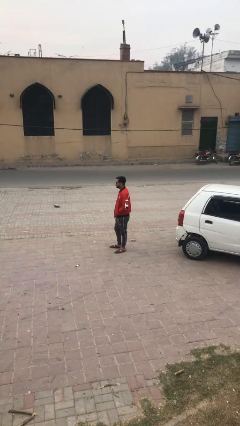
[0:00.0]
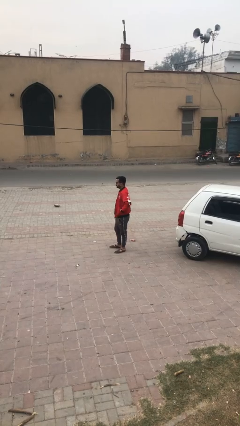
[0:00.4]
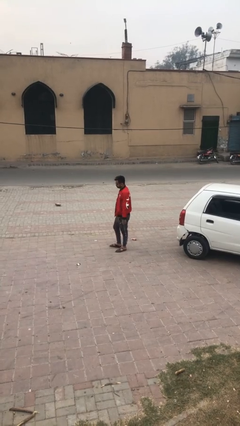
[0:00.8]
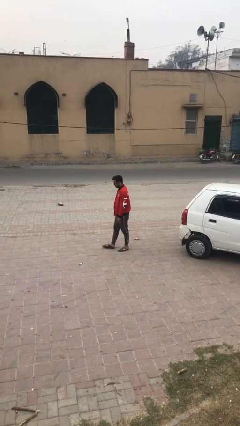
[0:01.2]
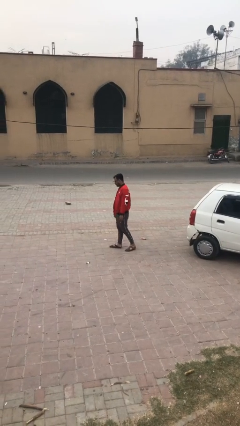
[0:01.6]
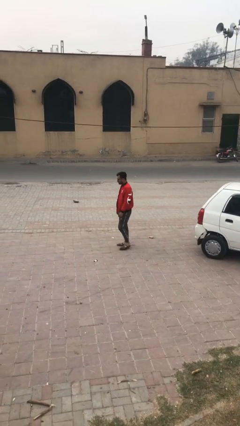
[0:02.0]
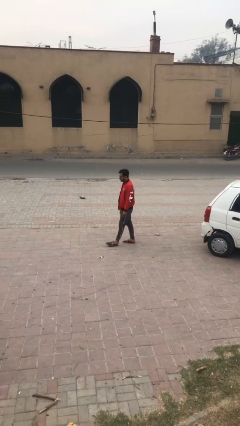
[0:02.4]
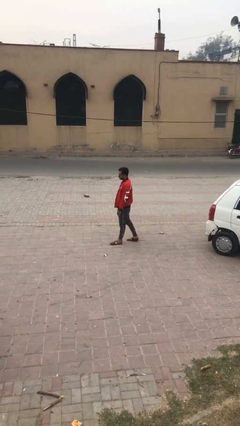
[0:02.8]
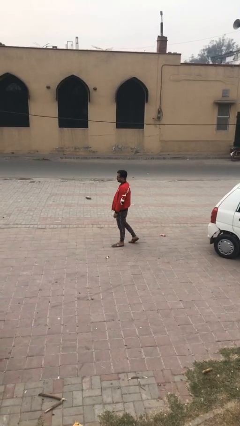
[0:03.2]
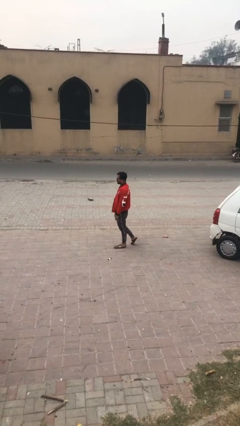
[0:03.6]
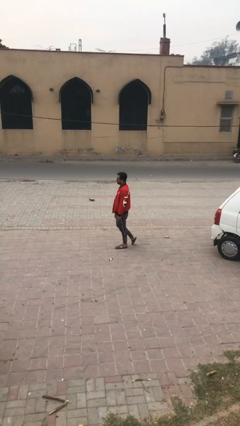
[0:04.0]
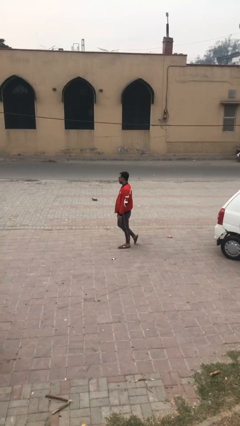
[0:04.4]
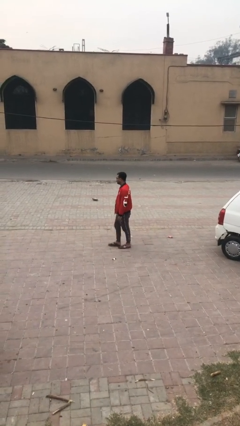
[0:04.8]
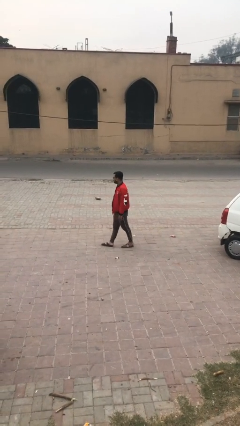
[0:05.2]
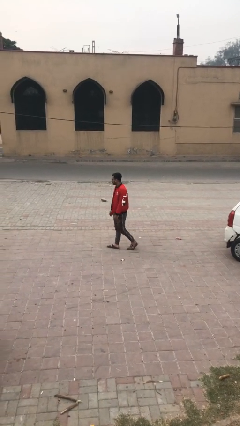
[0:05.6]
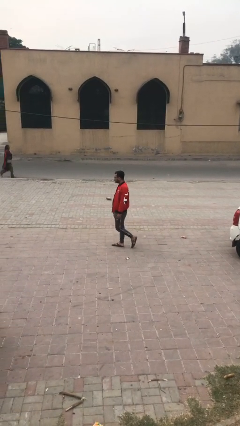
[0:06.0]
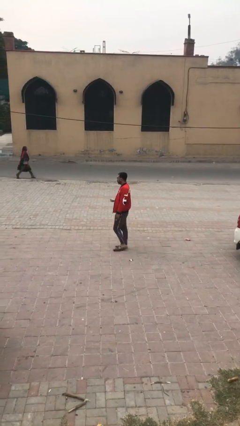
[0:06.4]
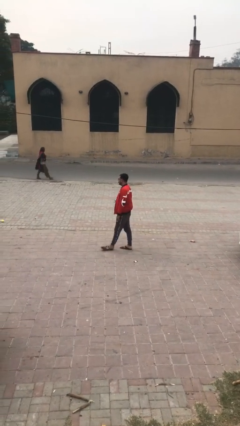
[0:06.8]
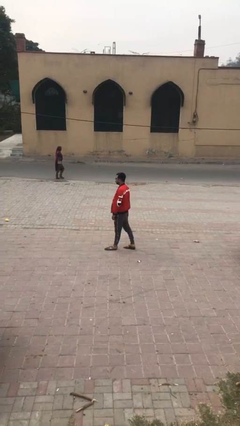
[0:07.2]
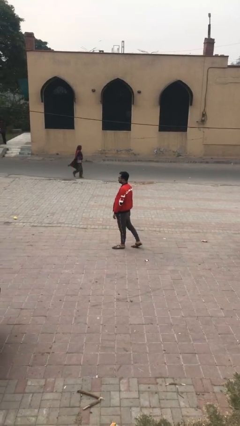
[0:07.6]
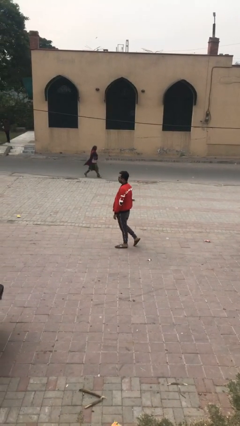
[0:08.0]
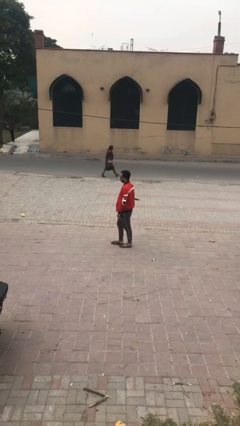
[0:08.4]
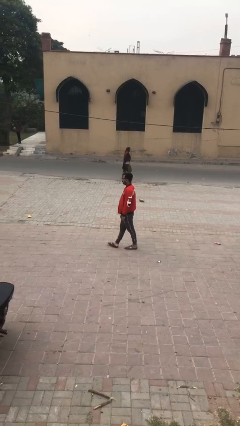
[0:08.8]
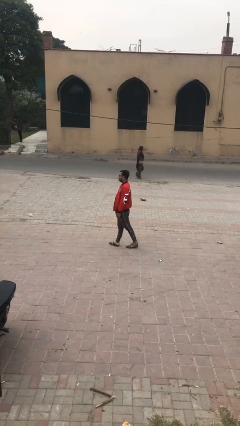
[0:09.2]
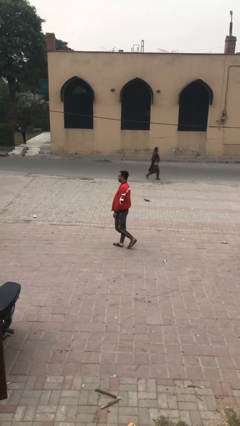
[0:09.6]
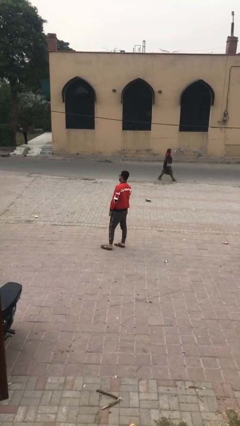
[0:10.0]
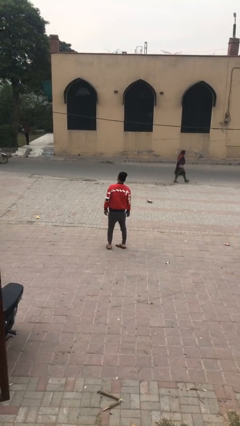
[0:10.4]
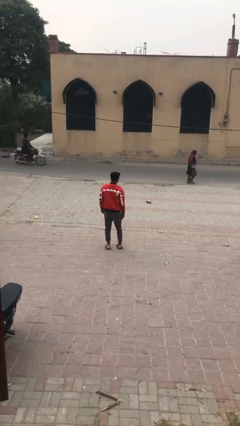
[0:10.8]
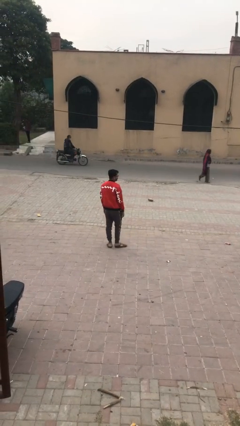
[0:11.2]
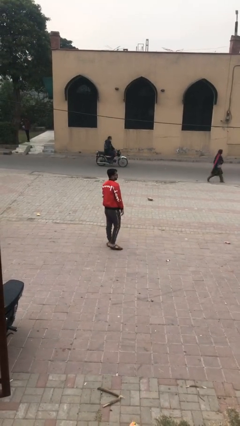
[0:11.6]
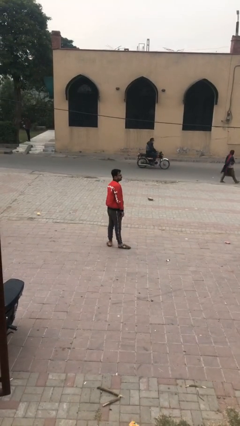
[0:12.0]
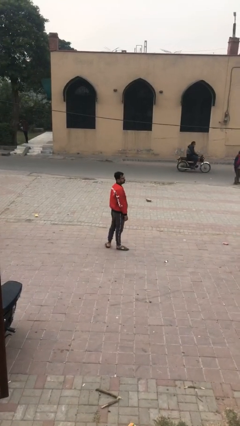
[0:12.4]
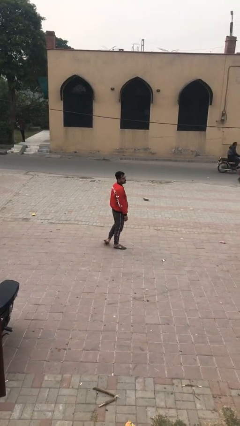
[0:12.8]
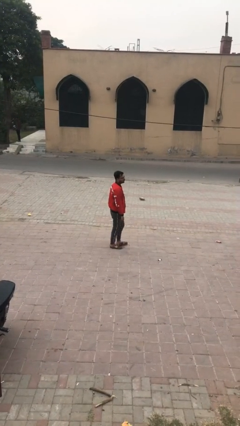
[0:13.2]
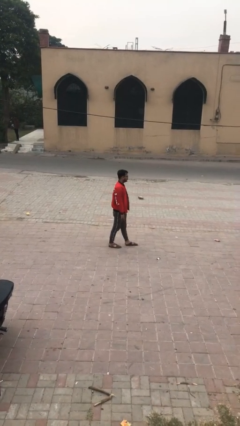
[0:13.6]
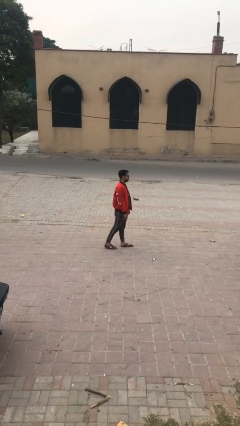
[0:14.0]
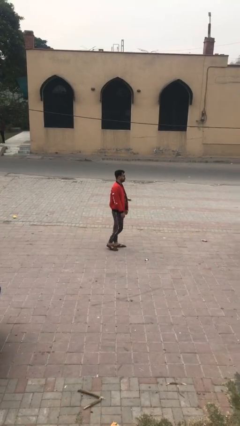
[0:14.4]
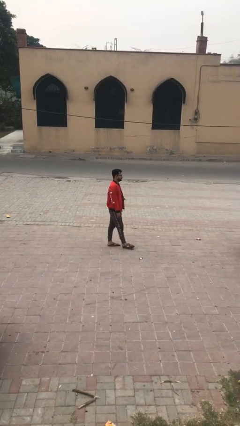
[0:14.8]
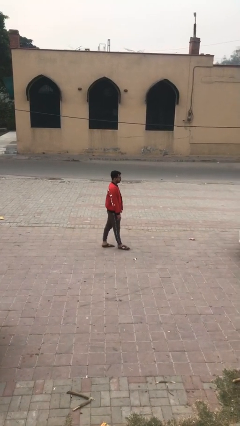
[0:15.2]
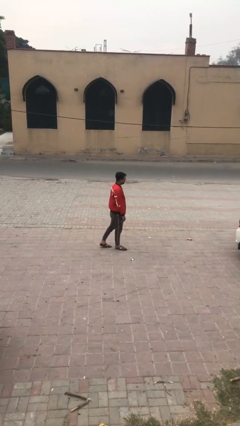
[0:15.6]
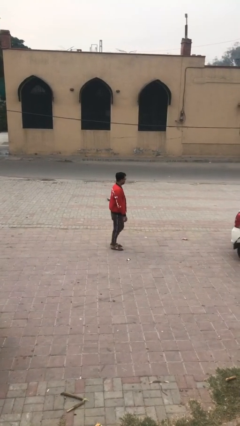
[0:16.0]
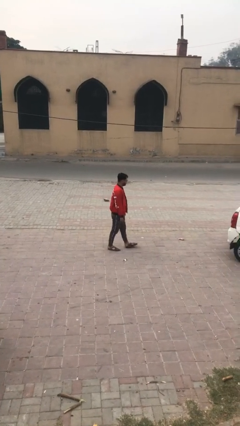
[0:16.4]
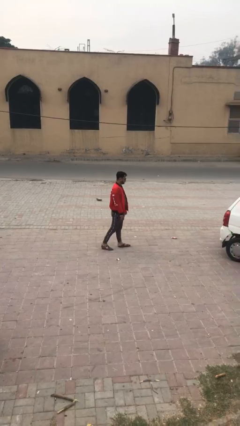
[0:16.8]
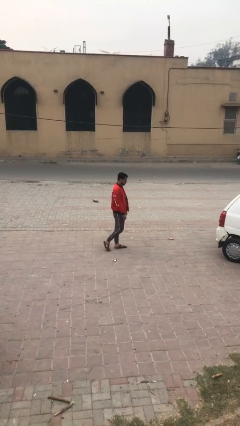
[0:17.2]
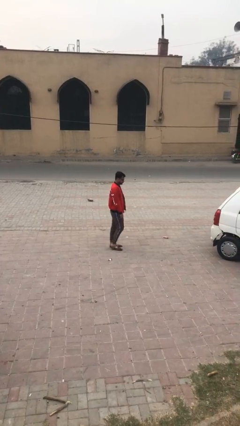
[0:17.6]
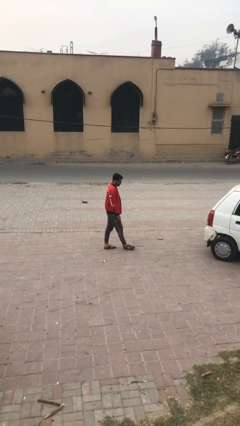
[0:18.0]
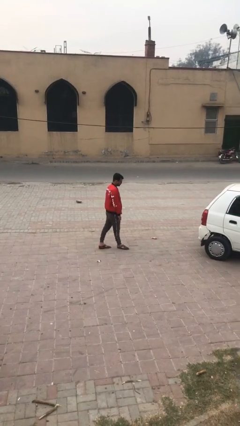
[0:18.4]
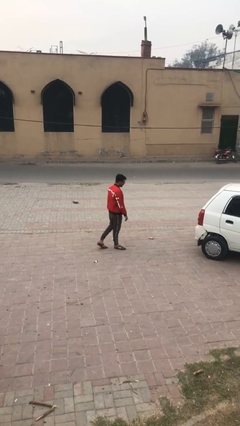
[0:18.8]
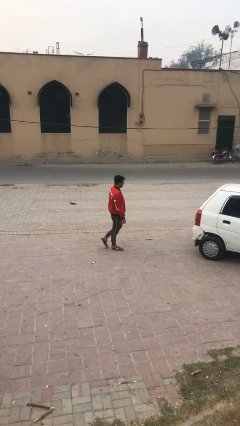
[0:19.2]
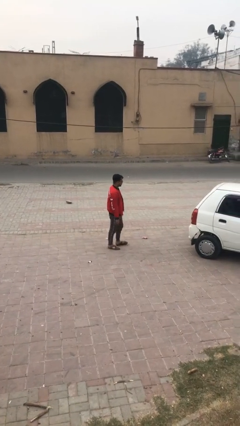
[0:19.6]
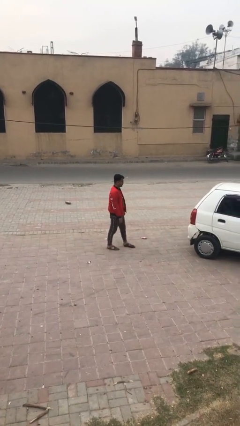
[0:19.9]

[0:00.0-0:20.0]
person walks

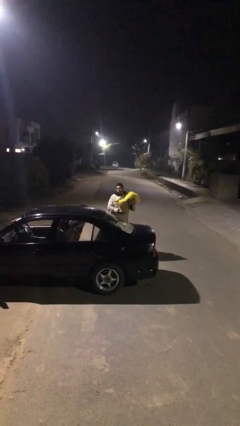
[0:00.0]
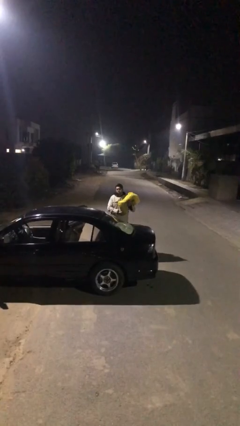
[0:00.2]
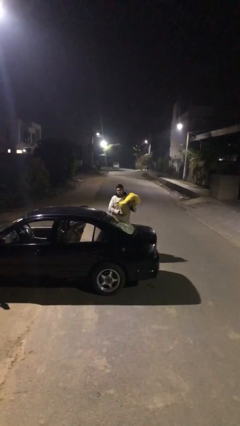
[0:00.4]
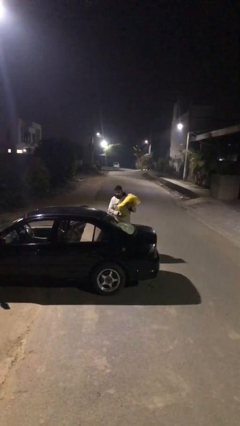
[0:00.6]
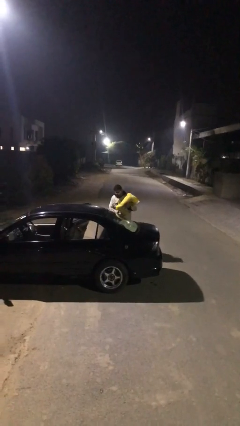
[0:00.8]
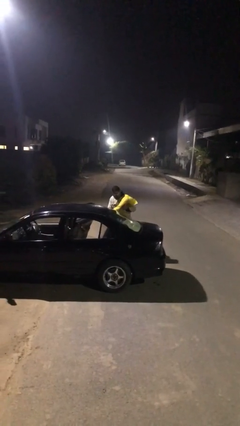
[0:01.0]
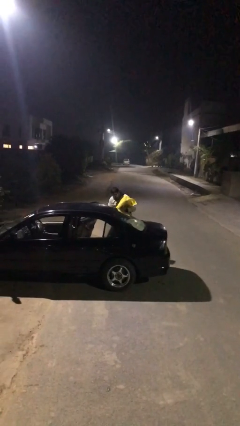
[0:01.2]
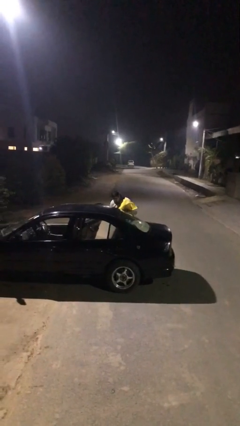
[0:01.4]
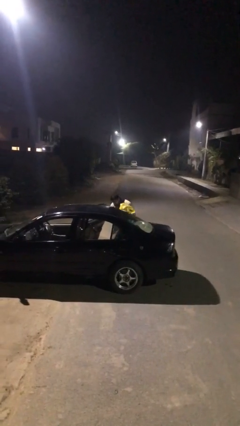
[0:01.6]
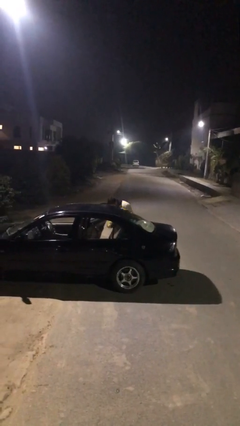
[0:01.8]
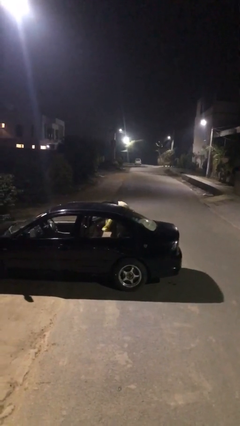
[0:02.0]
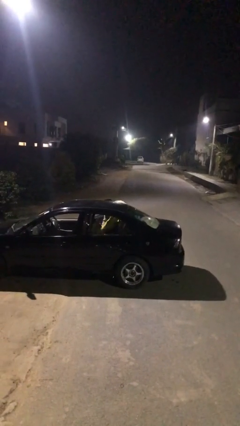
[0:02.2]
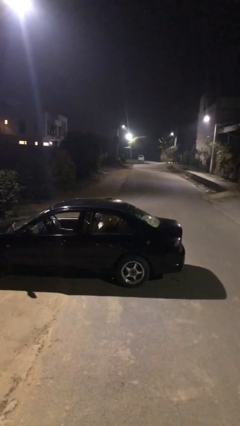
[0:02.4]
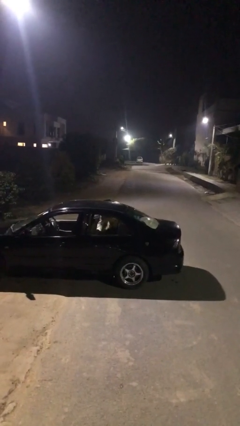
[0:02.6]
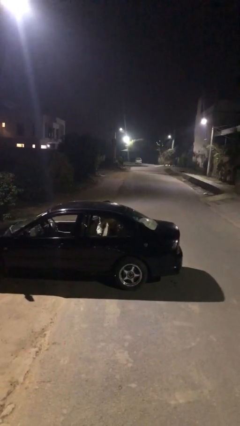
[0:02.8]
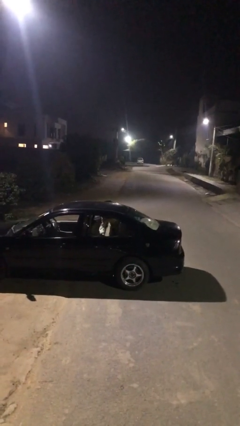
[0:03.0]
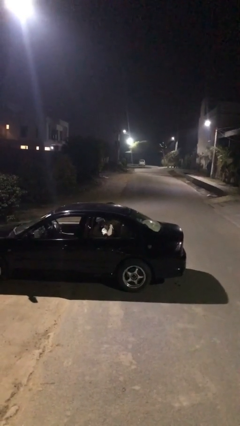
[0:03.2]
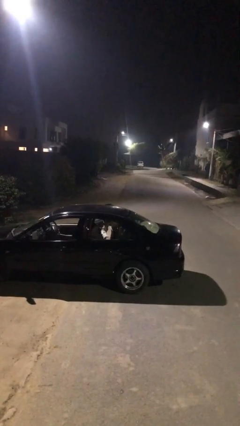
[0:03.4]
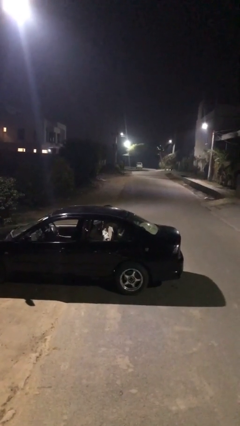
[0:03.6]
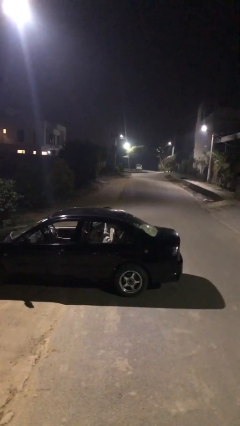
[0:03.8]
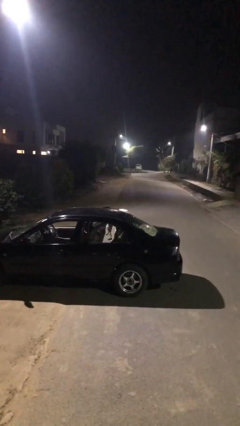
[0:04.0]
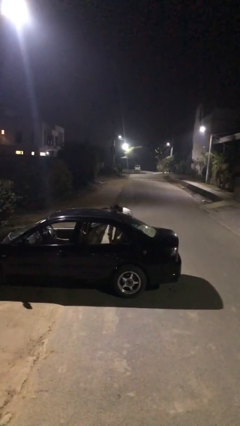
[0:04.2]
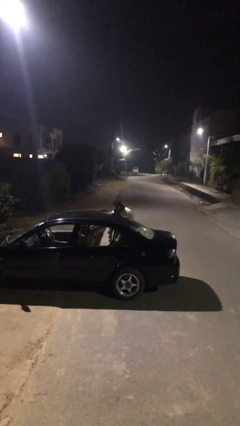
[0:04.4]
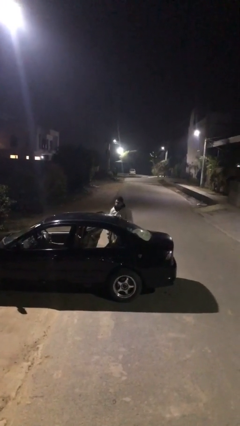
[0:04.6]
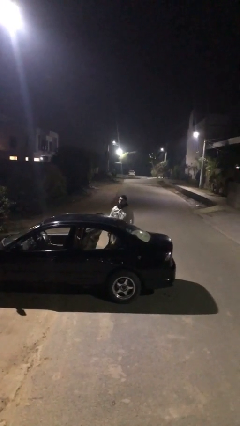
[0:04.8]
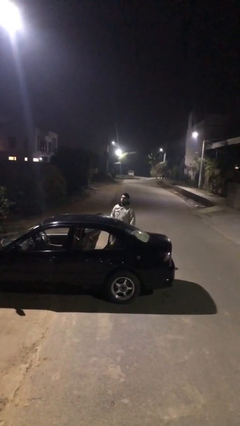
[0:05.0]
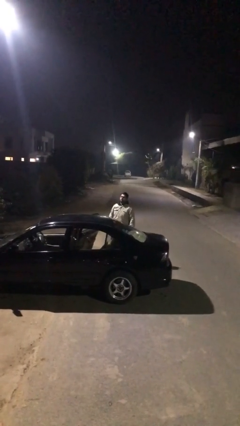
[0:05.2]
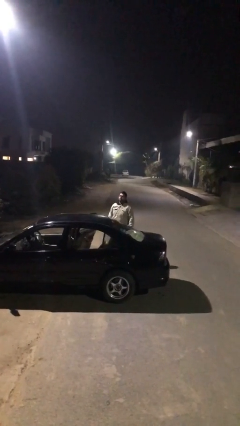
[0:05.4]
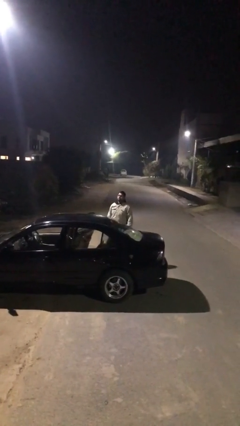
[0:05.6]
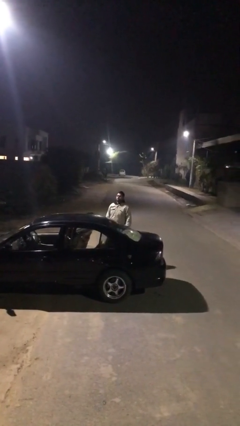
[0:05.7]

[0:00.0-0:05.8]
person loads car

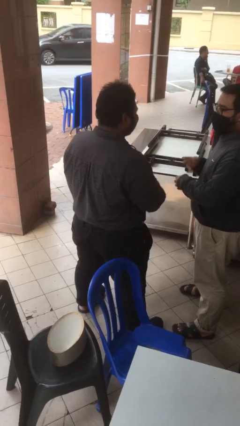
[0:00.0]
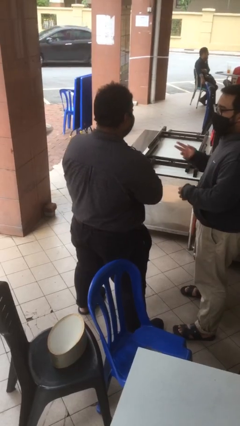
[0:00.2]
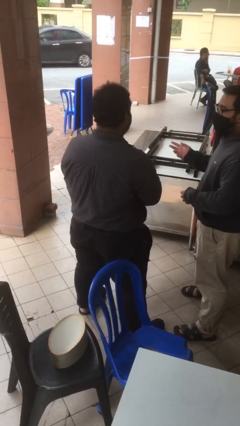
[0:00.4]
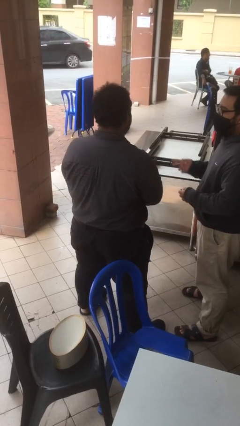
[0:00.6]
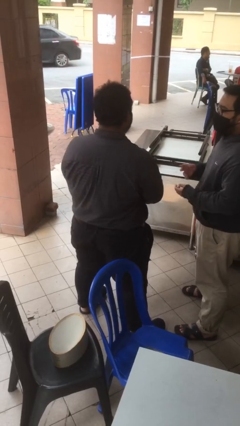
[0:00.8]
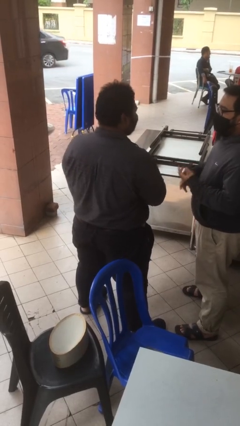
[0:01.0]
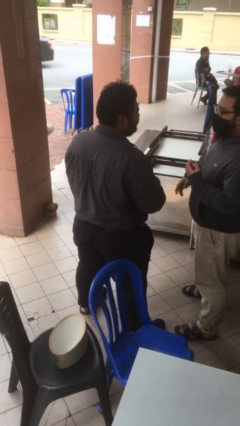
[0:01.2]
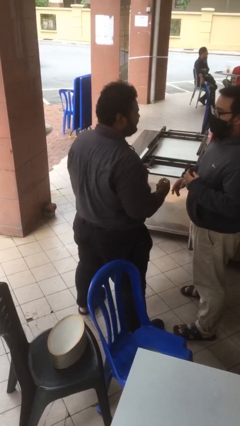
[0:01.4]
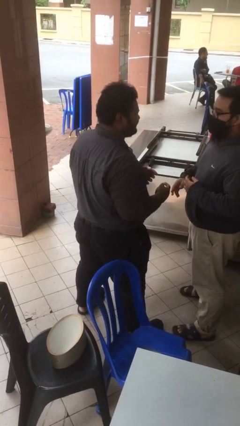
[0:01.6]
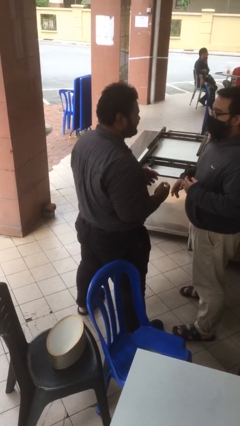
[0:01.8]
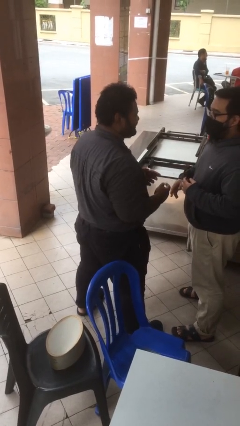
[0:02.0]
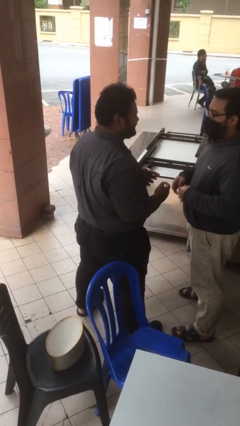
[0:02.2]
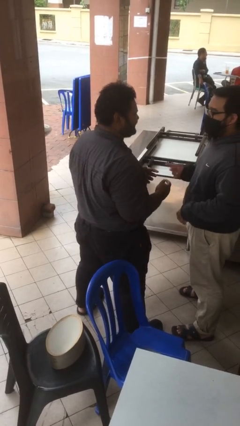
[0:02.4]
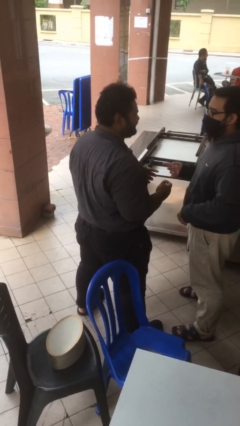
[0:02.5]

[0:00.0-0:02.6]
person talks to person
